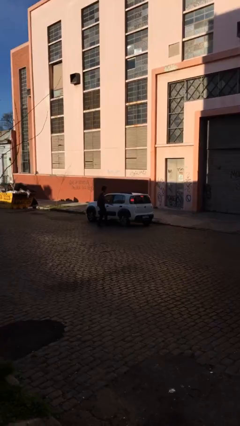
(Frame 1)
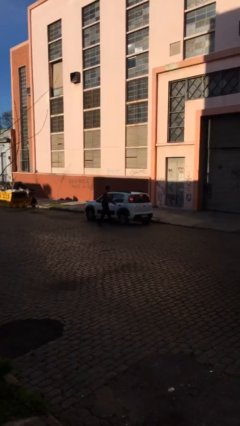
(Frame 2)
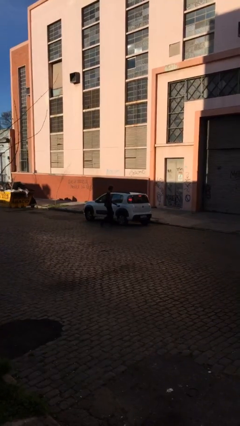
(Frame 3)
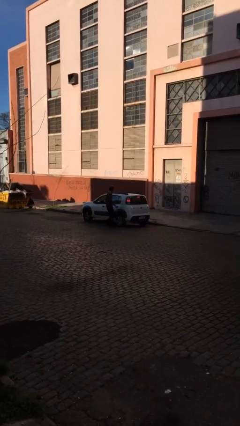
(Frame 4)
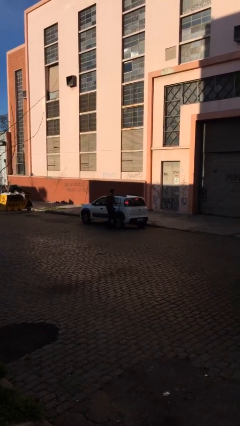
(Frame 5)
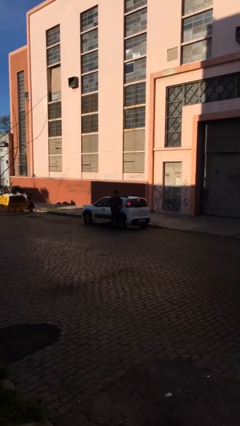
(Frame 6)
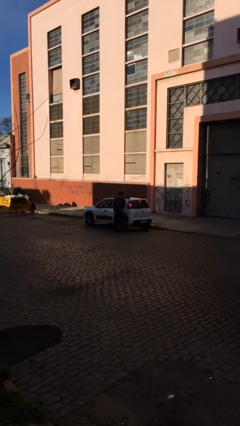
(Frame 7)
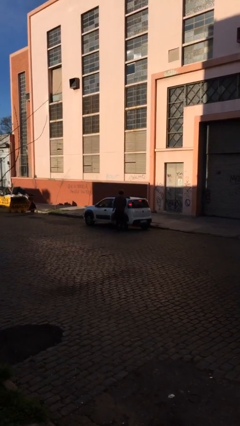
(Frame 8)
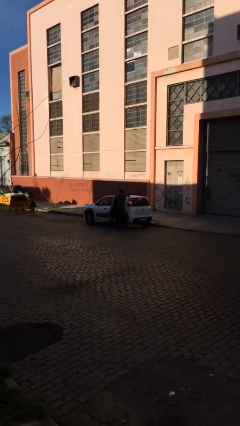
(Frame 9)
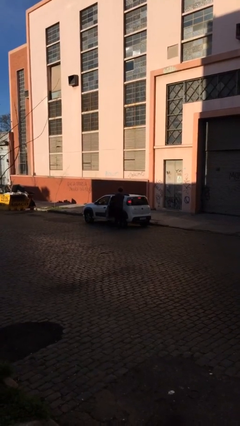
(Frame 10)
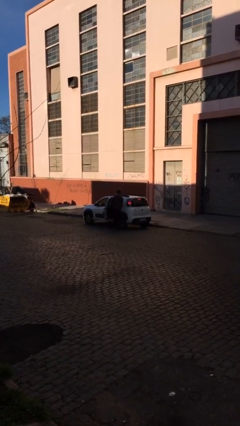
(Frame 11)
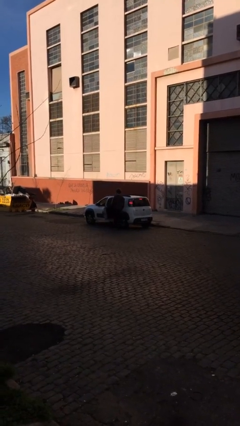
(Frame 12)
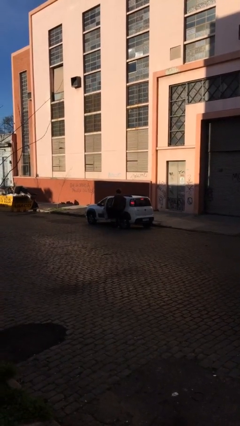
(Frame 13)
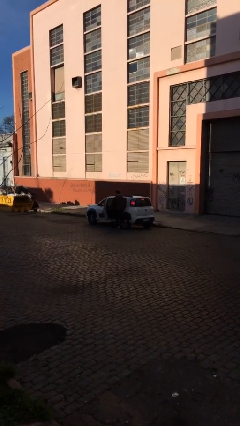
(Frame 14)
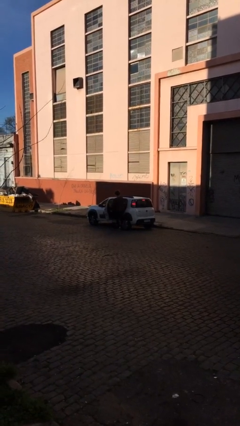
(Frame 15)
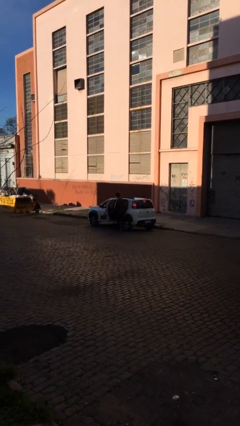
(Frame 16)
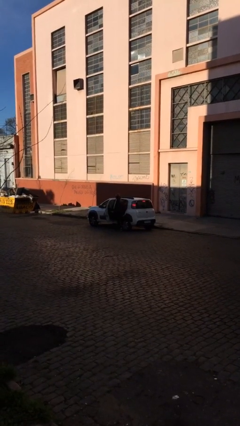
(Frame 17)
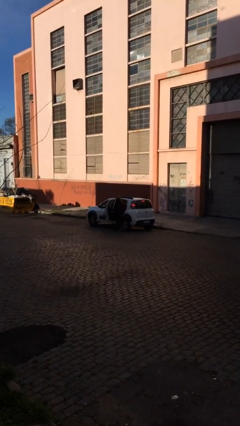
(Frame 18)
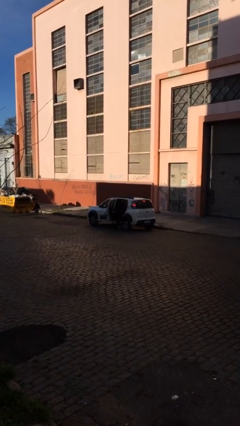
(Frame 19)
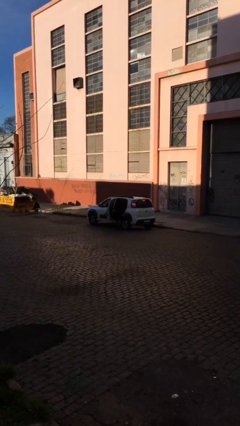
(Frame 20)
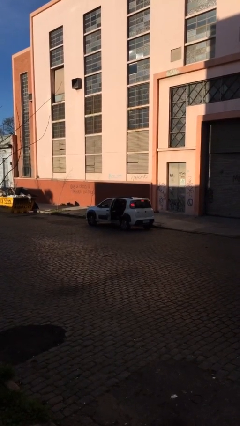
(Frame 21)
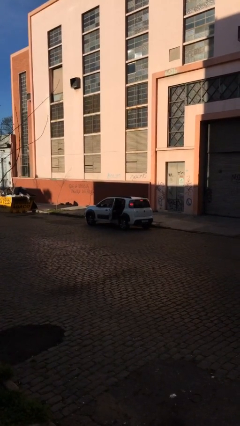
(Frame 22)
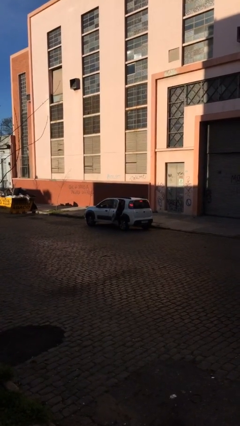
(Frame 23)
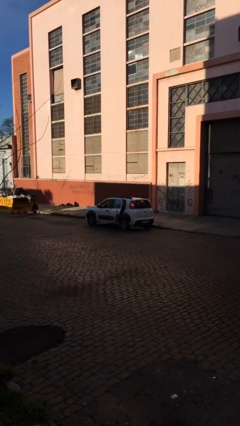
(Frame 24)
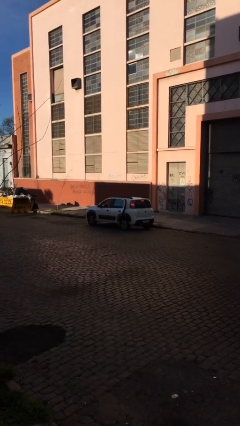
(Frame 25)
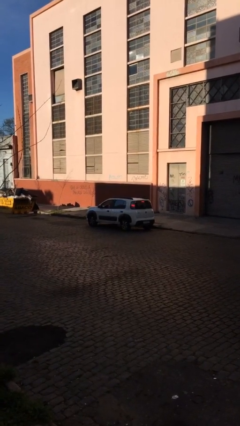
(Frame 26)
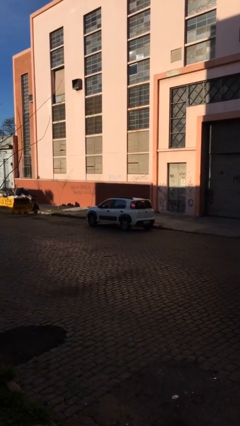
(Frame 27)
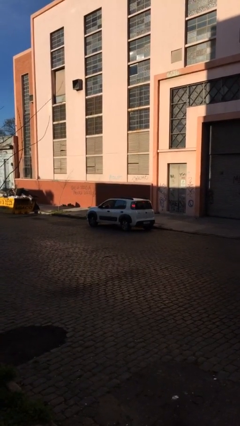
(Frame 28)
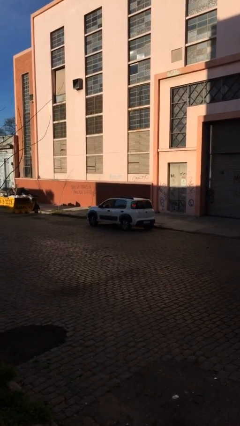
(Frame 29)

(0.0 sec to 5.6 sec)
car picks up person

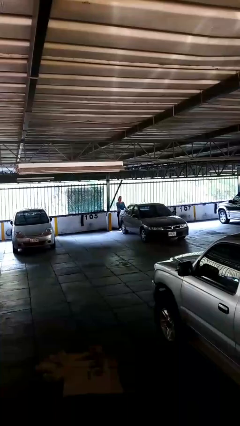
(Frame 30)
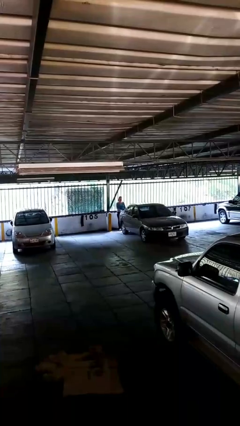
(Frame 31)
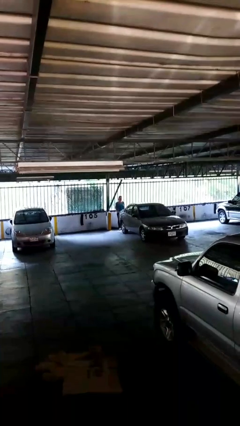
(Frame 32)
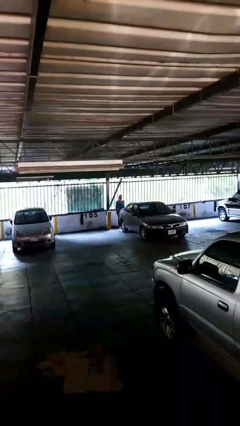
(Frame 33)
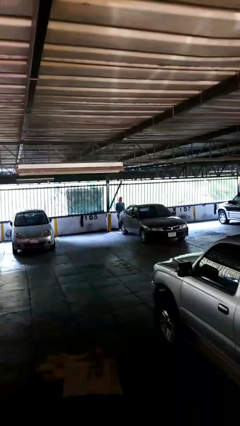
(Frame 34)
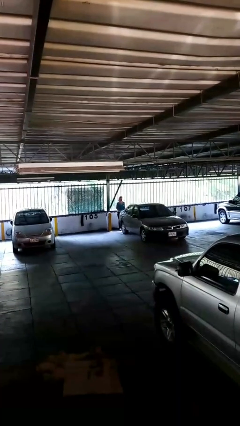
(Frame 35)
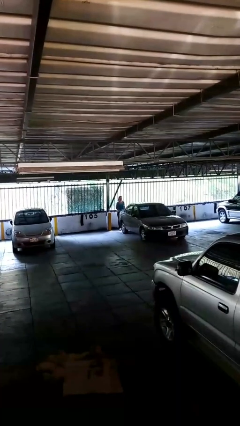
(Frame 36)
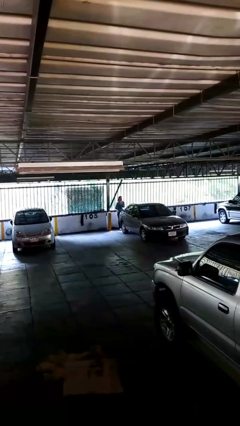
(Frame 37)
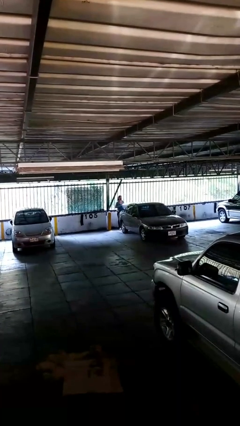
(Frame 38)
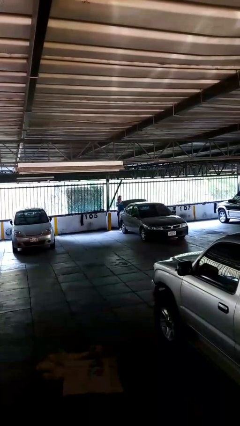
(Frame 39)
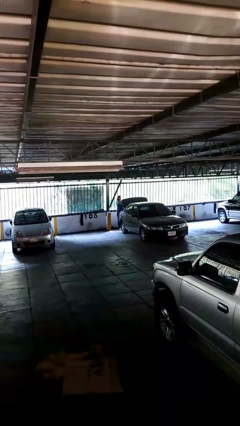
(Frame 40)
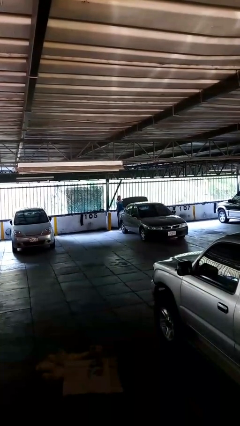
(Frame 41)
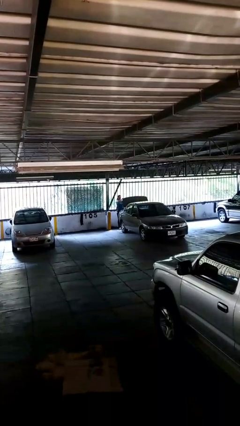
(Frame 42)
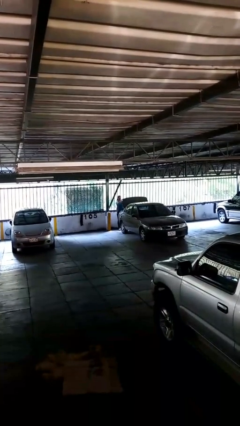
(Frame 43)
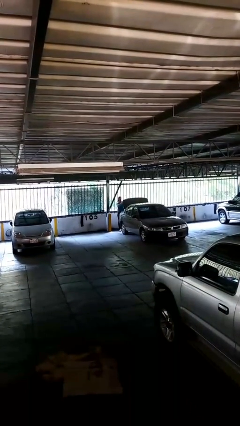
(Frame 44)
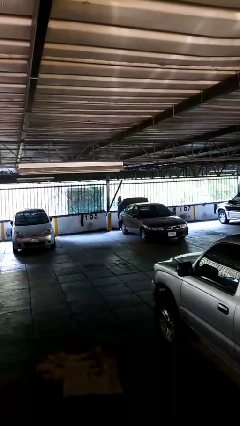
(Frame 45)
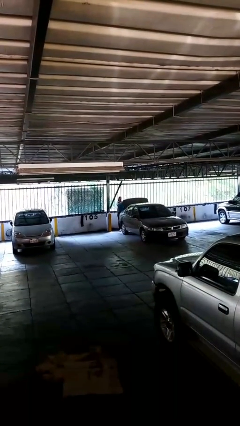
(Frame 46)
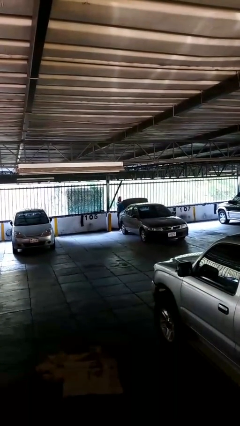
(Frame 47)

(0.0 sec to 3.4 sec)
person opens car trunk

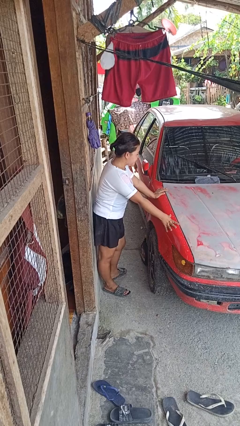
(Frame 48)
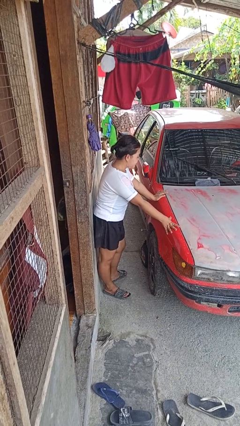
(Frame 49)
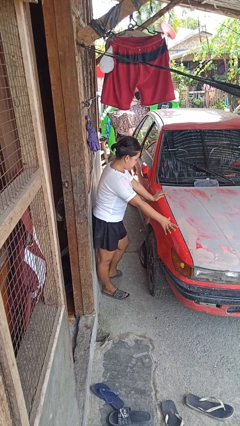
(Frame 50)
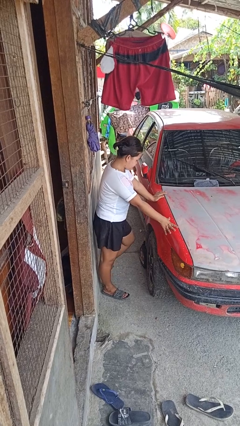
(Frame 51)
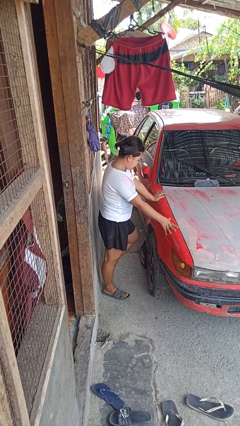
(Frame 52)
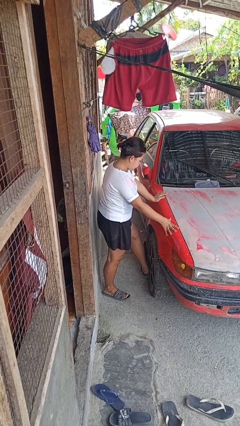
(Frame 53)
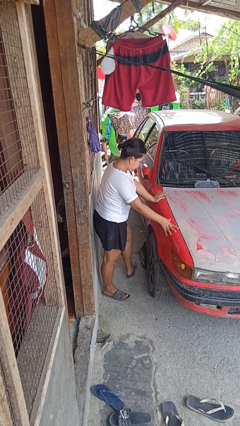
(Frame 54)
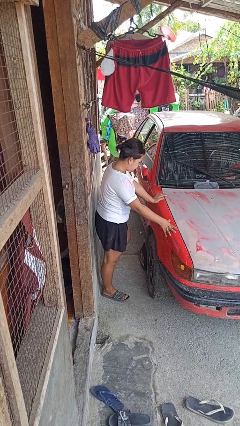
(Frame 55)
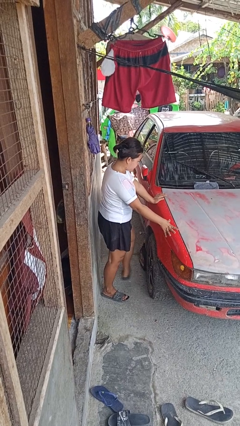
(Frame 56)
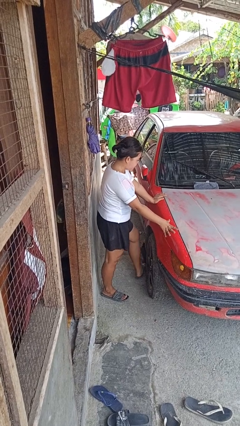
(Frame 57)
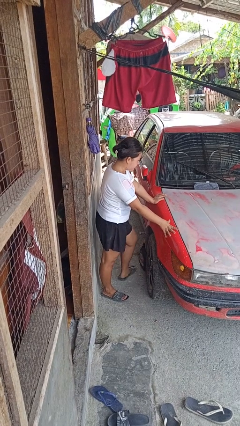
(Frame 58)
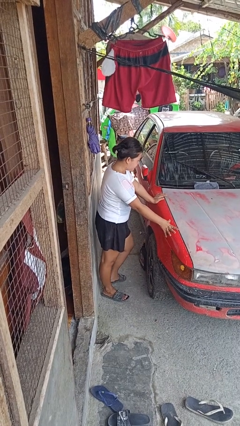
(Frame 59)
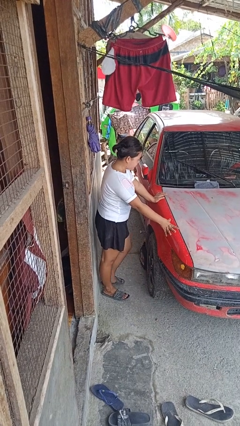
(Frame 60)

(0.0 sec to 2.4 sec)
person kicks car tires

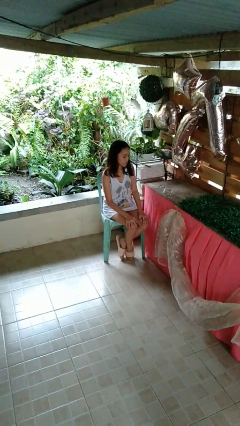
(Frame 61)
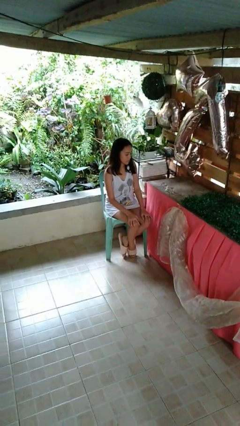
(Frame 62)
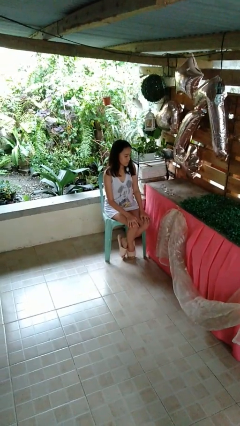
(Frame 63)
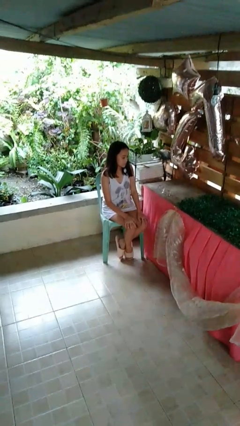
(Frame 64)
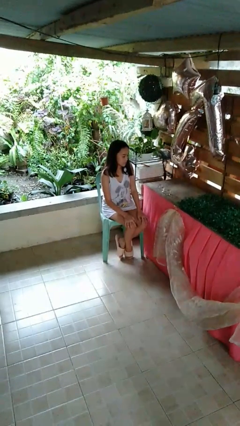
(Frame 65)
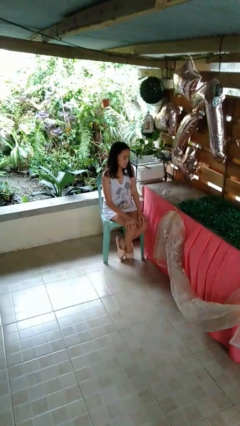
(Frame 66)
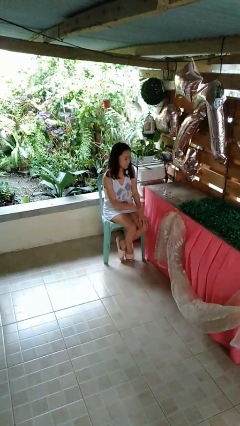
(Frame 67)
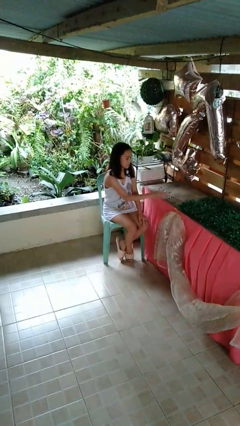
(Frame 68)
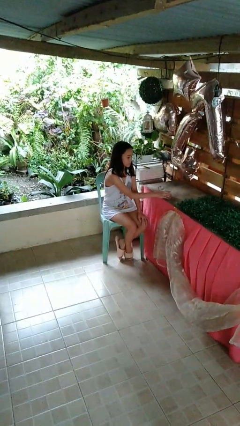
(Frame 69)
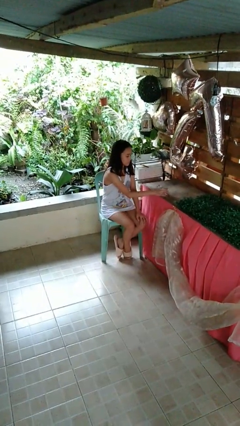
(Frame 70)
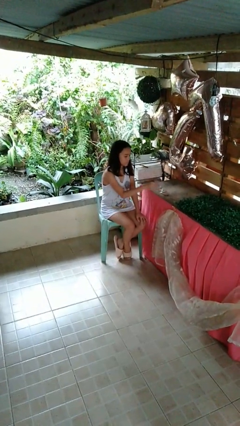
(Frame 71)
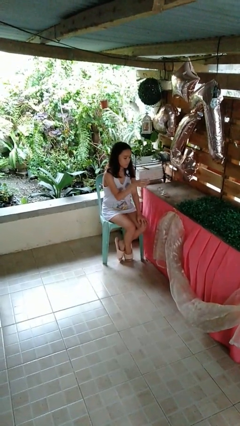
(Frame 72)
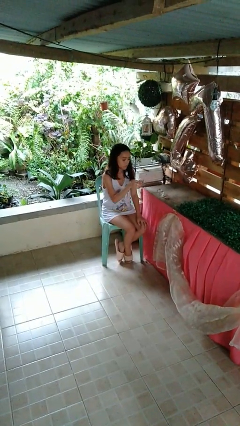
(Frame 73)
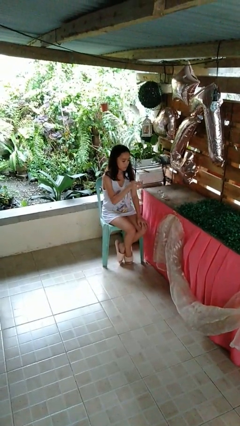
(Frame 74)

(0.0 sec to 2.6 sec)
person picks up object from table

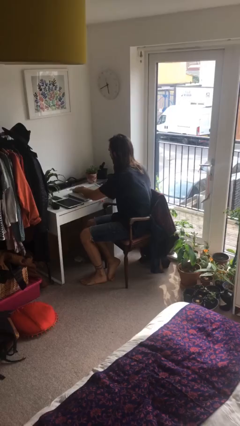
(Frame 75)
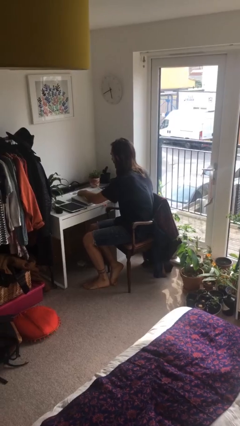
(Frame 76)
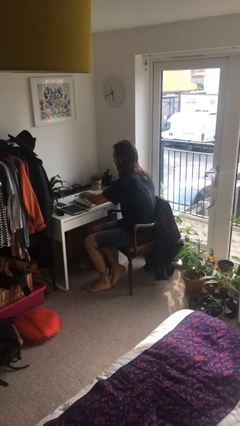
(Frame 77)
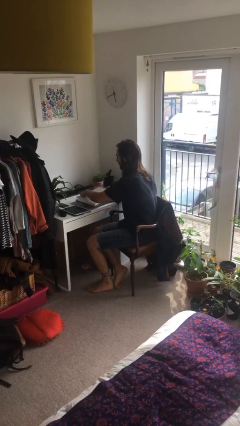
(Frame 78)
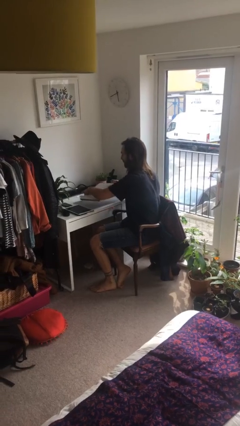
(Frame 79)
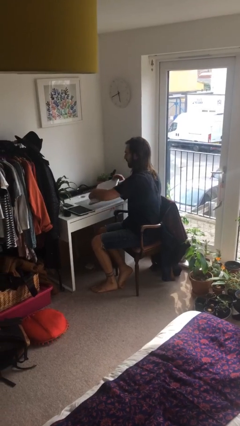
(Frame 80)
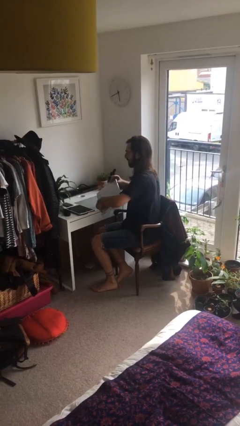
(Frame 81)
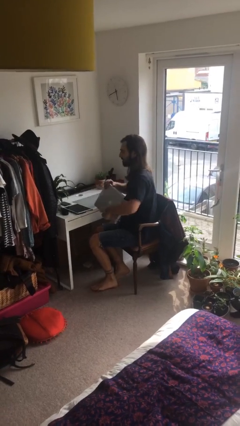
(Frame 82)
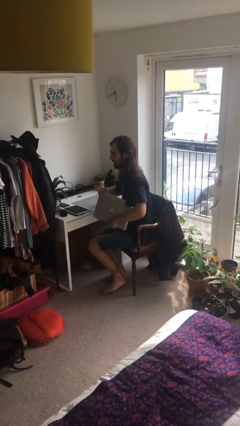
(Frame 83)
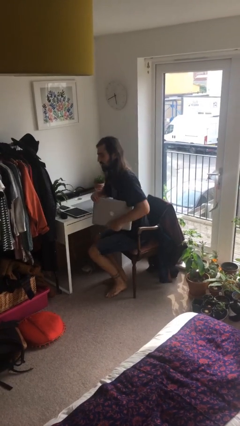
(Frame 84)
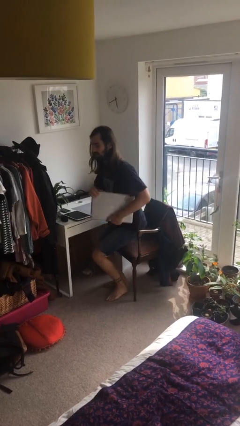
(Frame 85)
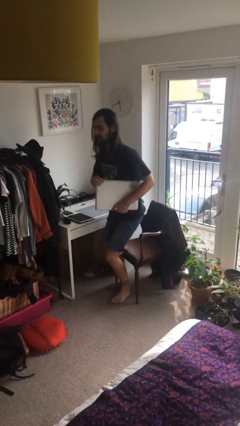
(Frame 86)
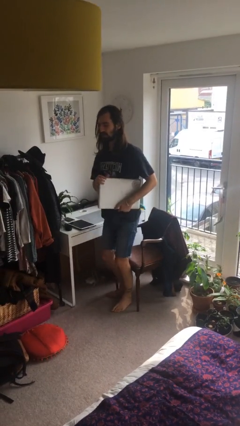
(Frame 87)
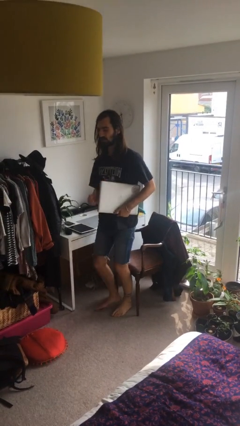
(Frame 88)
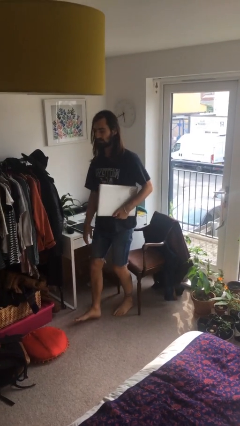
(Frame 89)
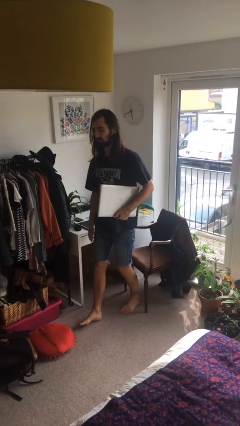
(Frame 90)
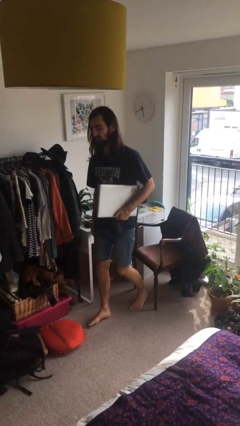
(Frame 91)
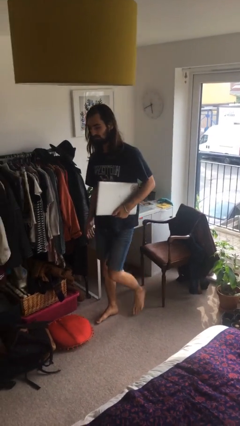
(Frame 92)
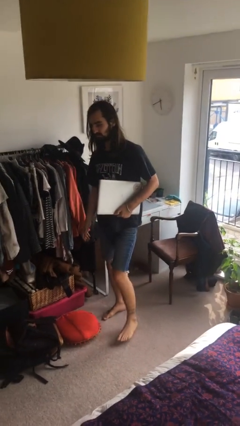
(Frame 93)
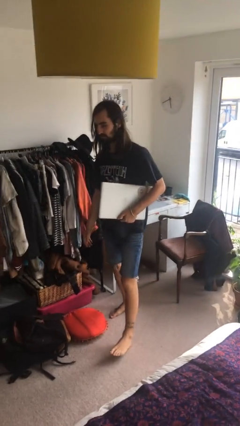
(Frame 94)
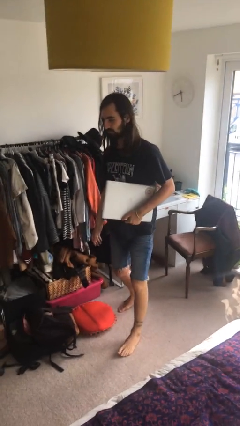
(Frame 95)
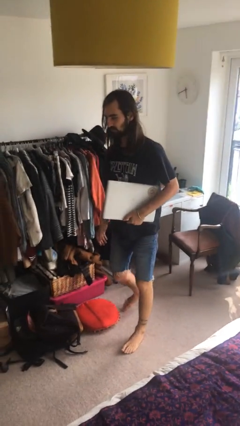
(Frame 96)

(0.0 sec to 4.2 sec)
person stands up
